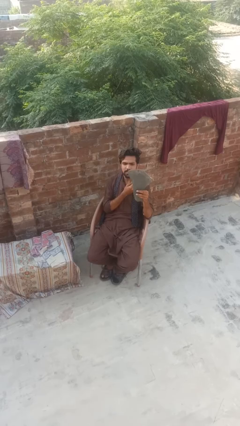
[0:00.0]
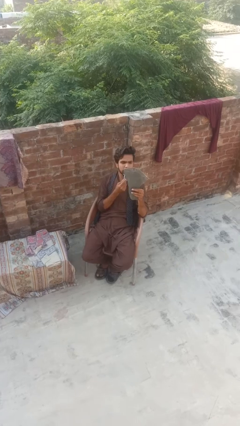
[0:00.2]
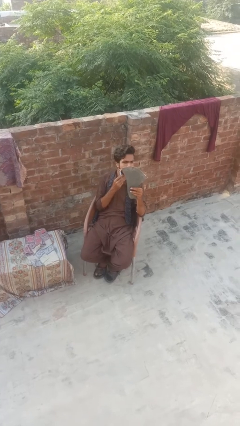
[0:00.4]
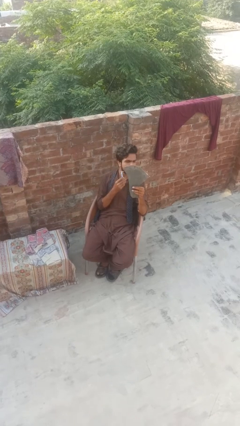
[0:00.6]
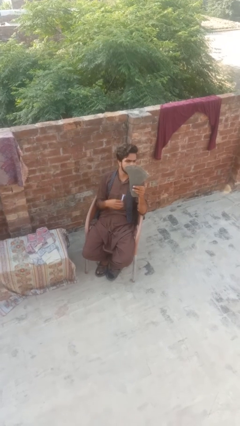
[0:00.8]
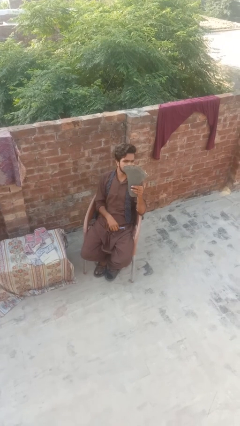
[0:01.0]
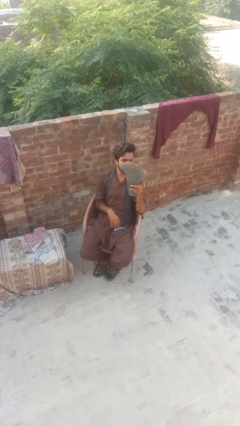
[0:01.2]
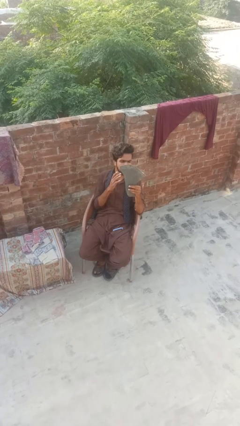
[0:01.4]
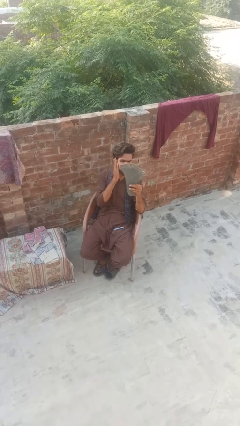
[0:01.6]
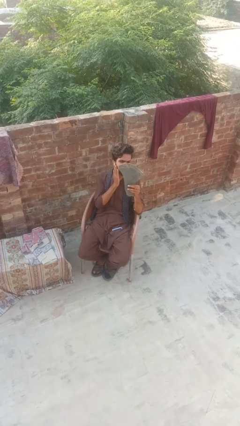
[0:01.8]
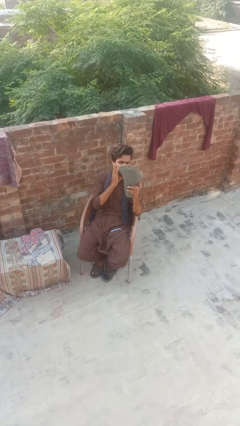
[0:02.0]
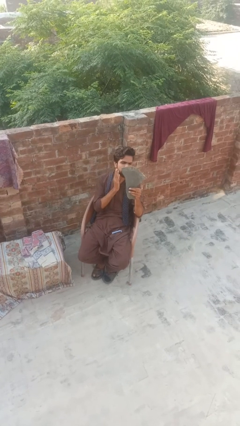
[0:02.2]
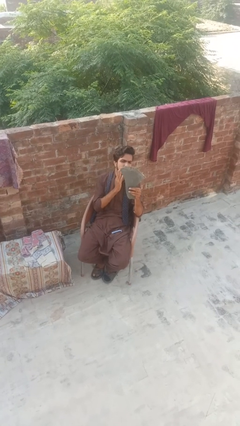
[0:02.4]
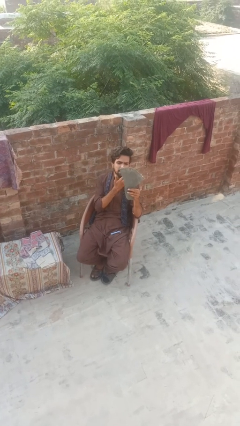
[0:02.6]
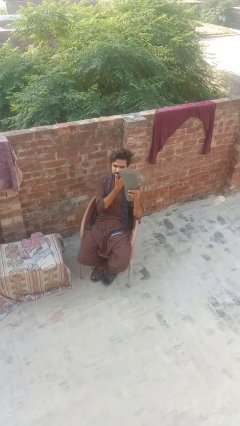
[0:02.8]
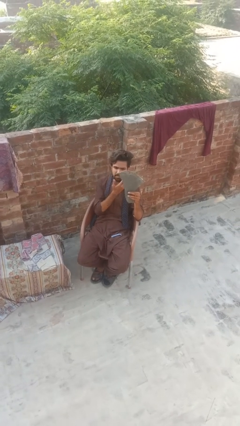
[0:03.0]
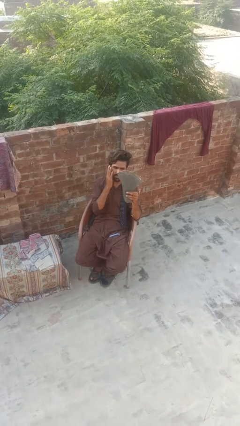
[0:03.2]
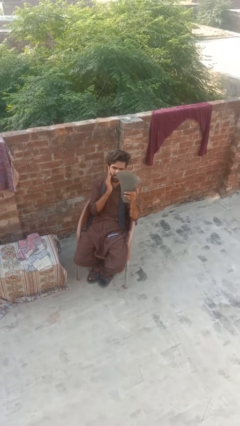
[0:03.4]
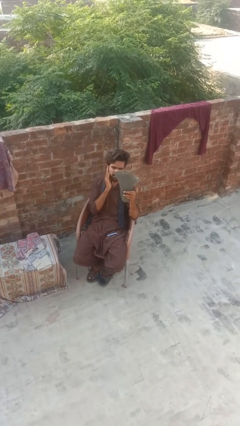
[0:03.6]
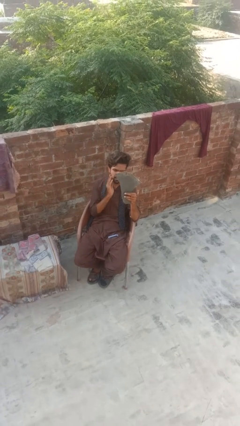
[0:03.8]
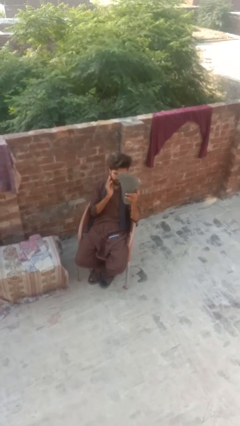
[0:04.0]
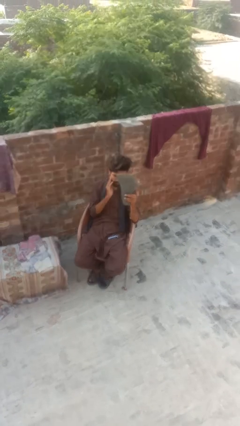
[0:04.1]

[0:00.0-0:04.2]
person applies shaving cream

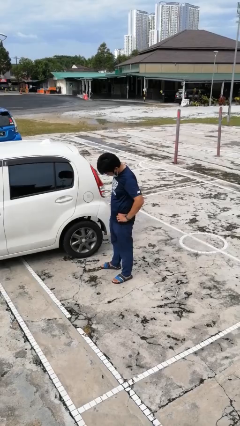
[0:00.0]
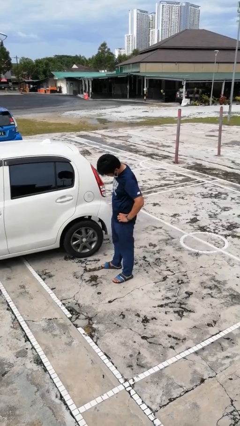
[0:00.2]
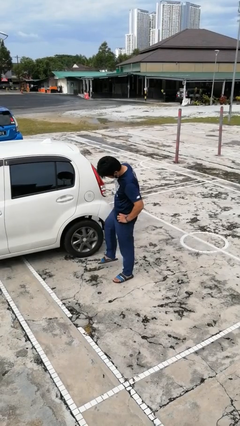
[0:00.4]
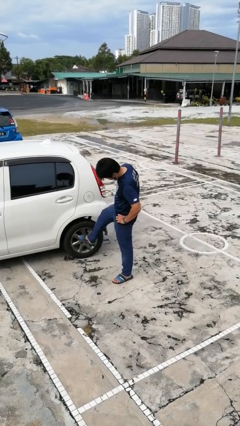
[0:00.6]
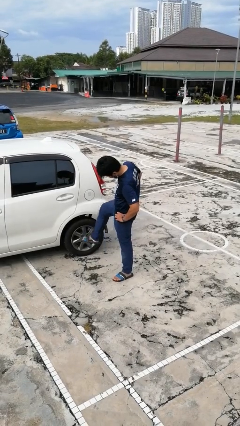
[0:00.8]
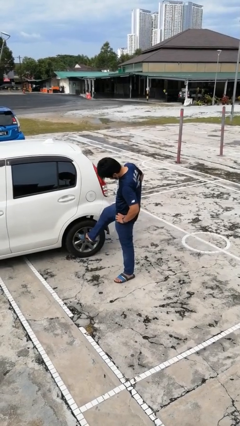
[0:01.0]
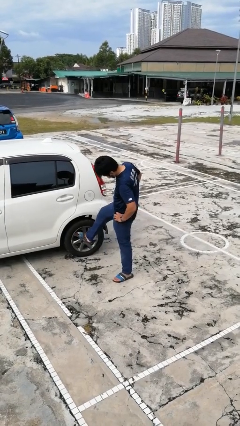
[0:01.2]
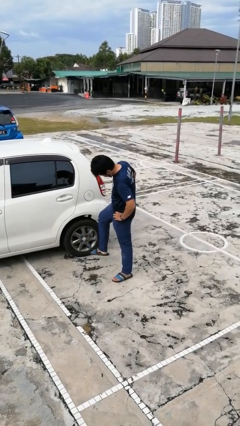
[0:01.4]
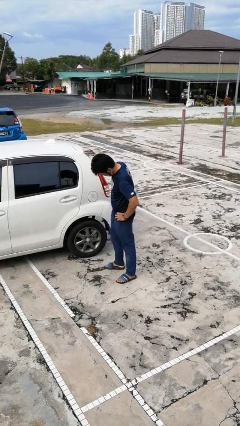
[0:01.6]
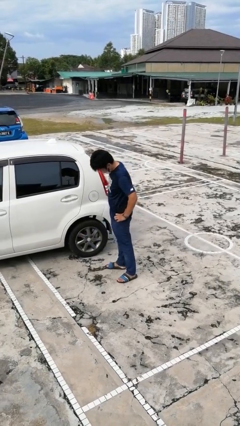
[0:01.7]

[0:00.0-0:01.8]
person kicks car tires

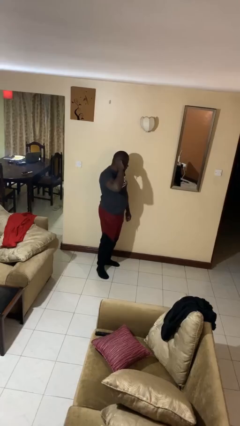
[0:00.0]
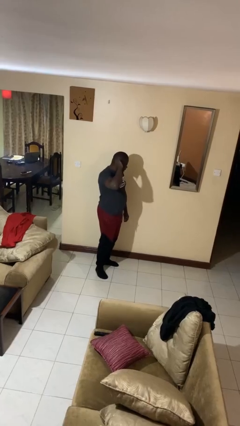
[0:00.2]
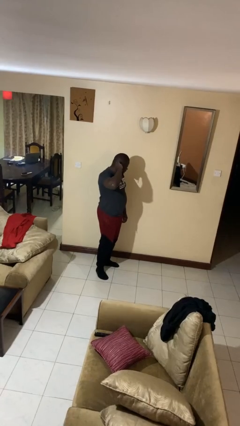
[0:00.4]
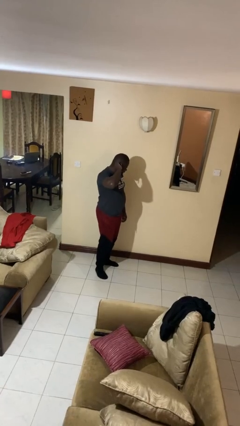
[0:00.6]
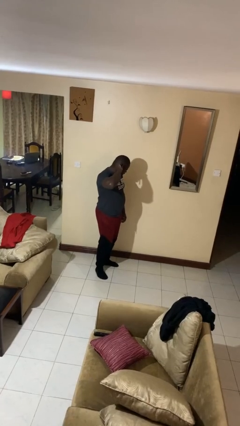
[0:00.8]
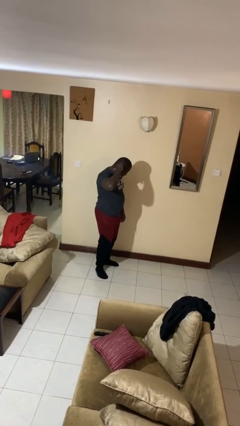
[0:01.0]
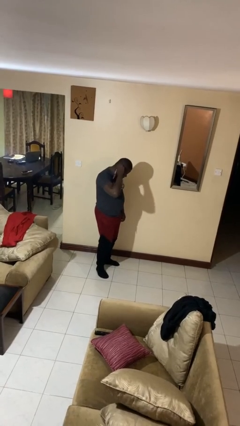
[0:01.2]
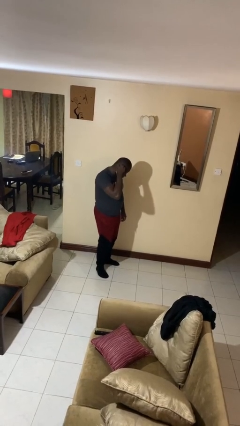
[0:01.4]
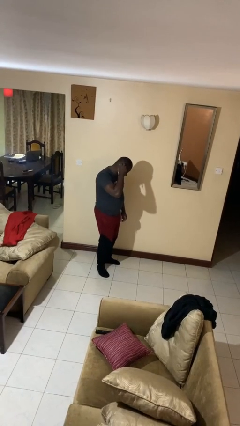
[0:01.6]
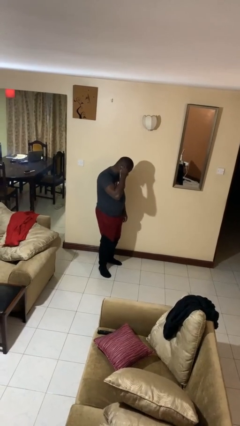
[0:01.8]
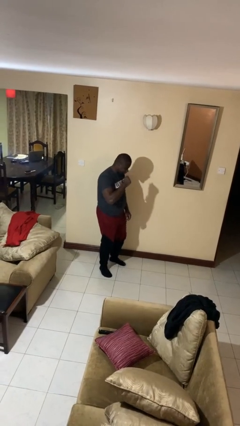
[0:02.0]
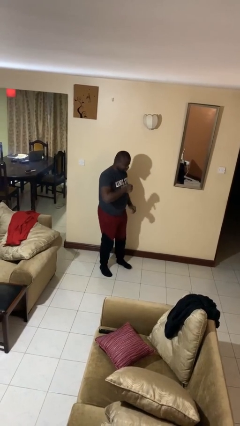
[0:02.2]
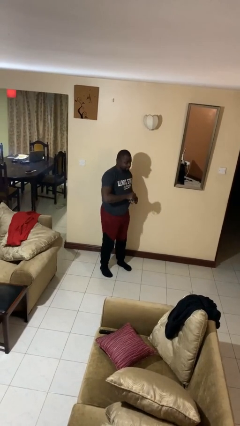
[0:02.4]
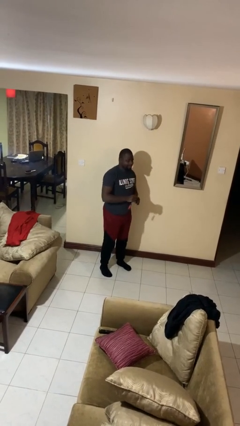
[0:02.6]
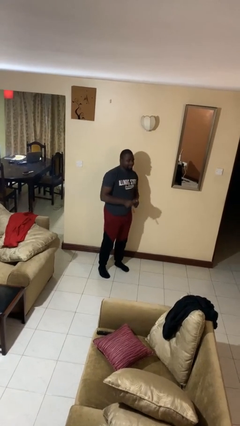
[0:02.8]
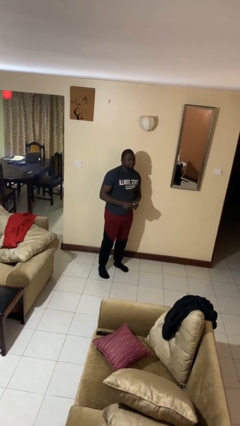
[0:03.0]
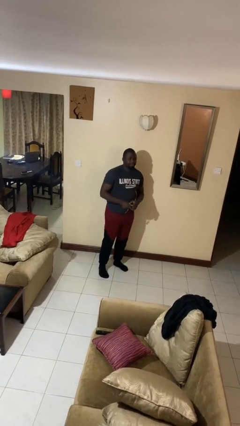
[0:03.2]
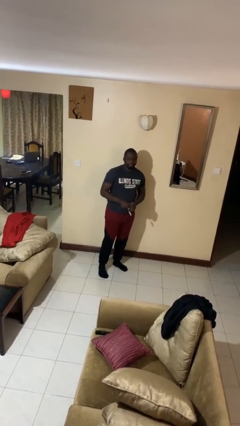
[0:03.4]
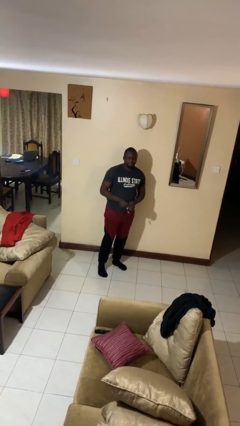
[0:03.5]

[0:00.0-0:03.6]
person takes off earrings

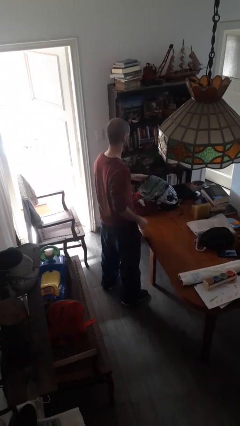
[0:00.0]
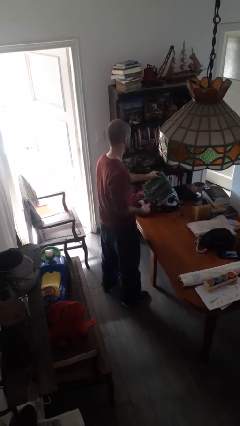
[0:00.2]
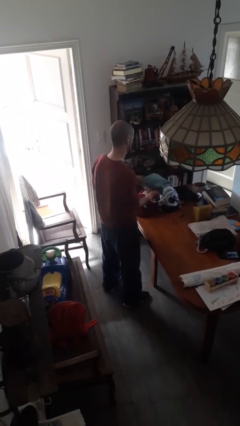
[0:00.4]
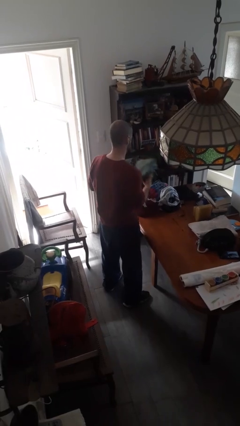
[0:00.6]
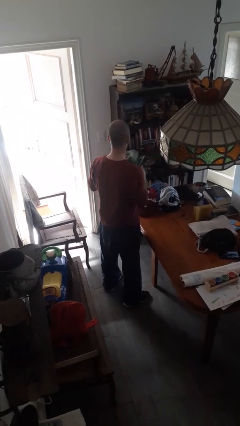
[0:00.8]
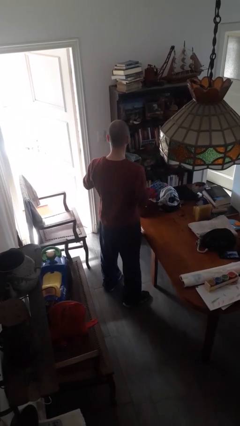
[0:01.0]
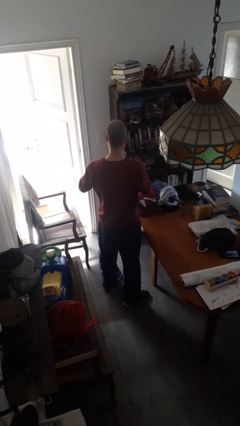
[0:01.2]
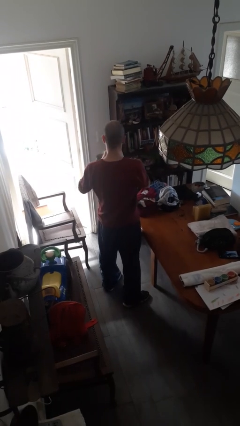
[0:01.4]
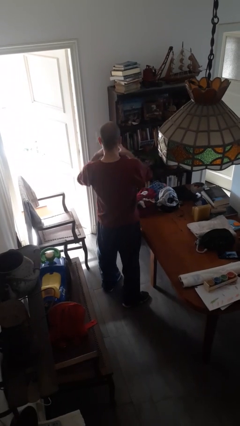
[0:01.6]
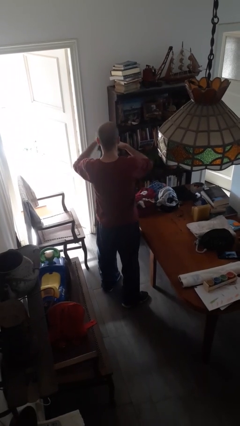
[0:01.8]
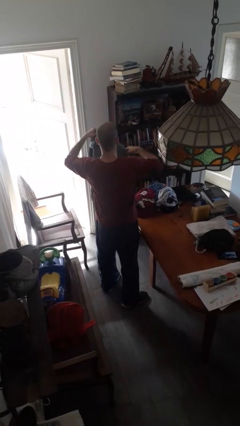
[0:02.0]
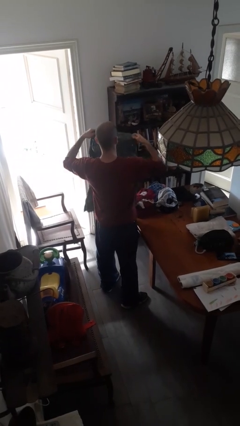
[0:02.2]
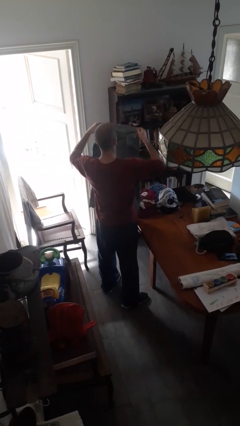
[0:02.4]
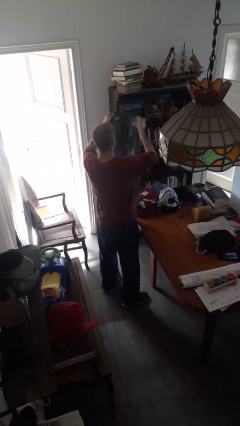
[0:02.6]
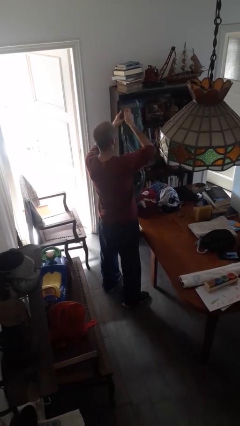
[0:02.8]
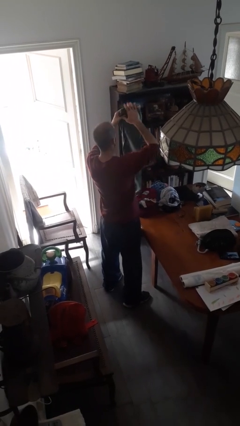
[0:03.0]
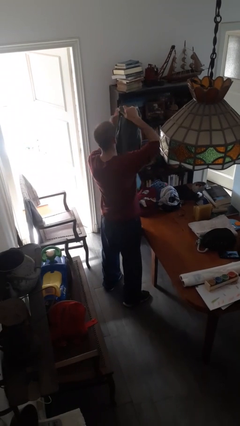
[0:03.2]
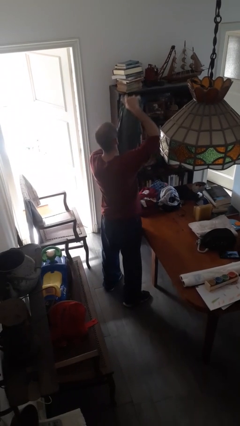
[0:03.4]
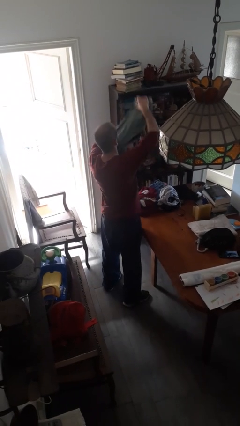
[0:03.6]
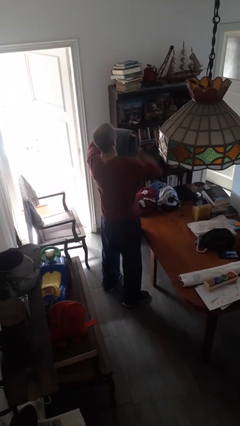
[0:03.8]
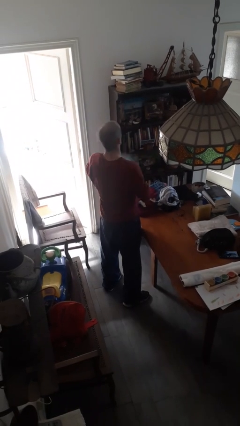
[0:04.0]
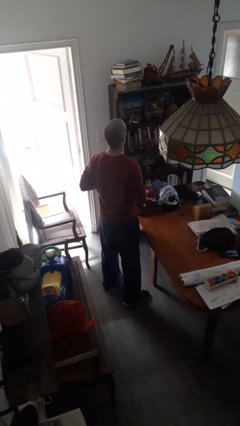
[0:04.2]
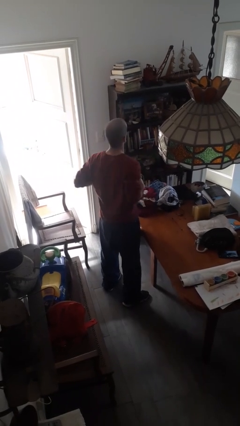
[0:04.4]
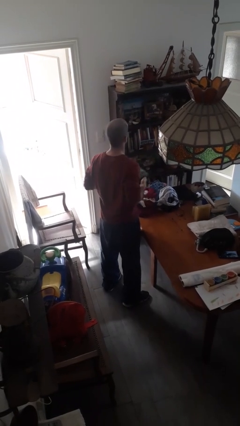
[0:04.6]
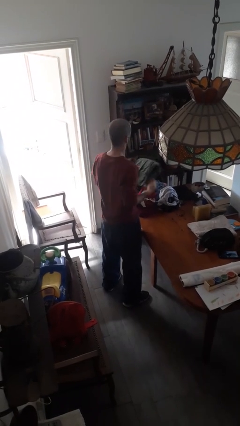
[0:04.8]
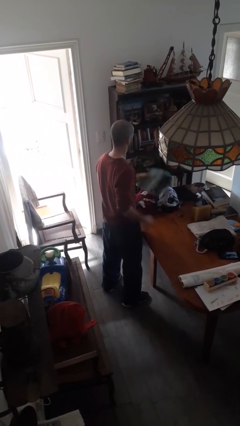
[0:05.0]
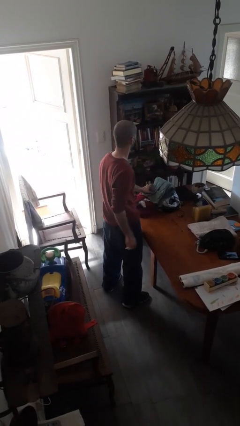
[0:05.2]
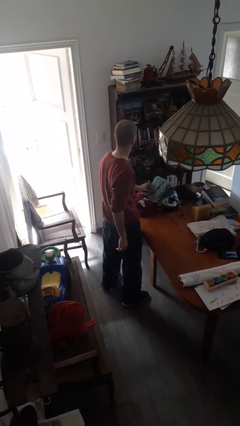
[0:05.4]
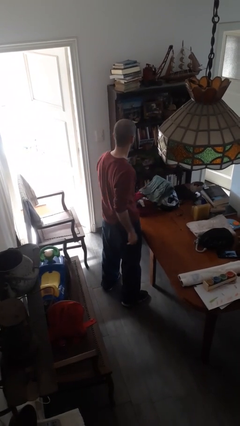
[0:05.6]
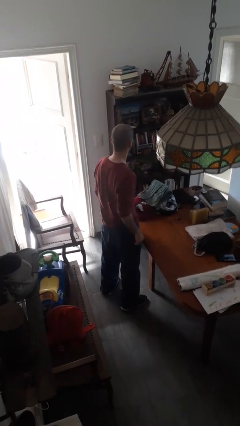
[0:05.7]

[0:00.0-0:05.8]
person folds pants

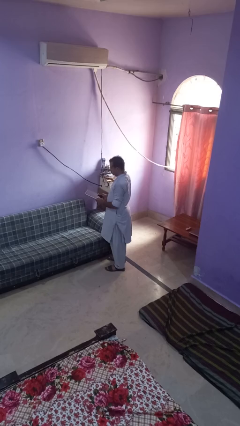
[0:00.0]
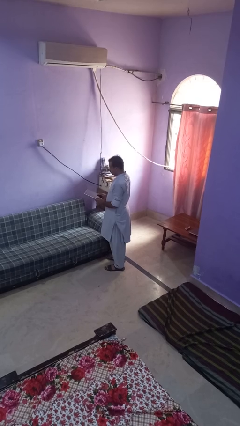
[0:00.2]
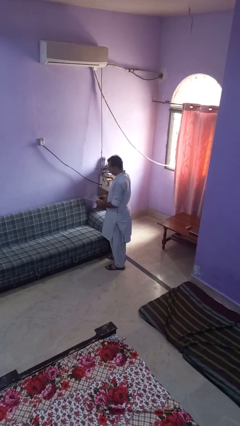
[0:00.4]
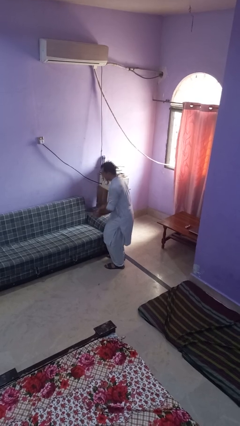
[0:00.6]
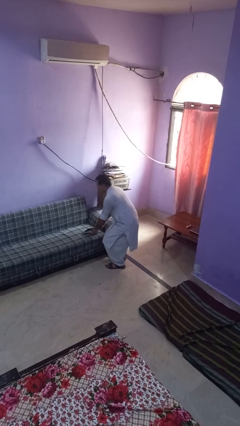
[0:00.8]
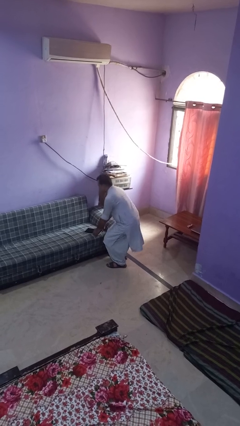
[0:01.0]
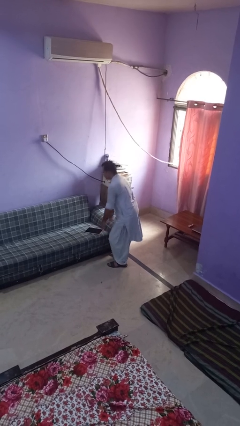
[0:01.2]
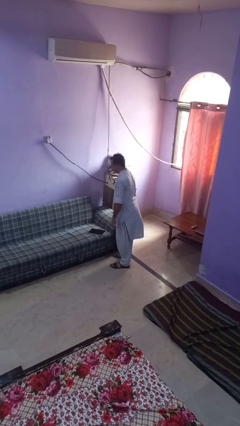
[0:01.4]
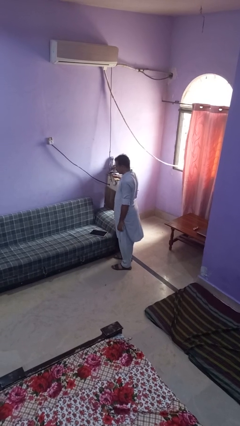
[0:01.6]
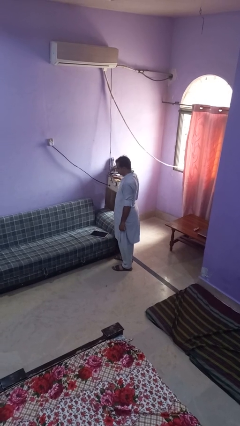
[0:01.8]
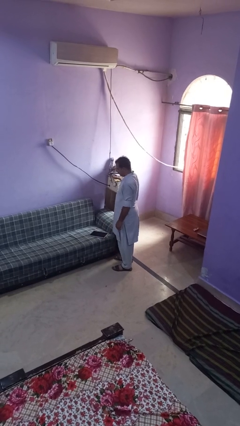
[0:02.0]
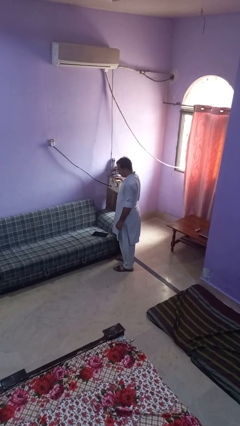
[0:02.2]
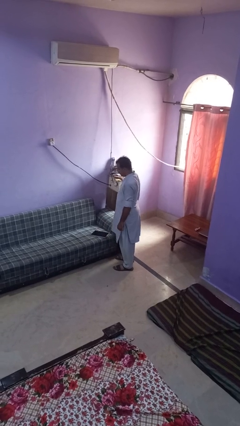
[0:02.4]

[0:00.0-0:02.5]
person puts down object on couch
